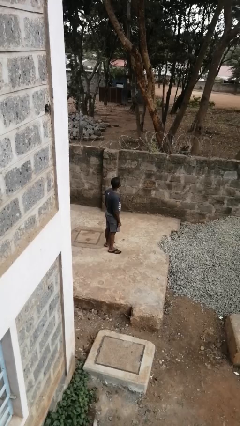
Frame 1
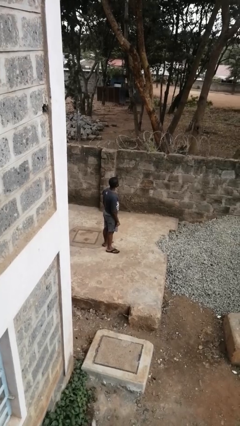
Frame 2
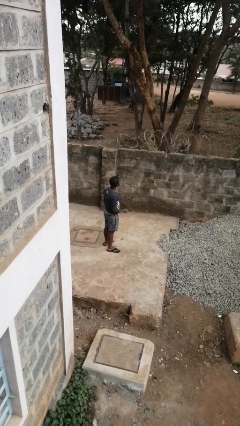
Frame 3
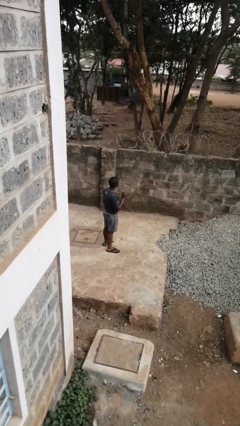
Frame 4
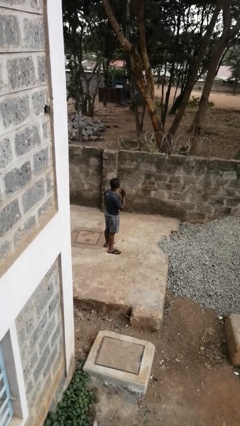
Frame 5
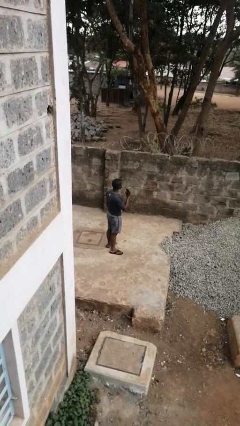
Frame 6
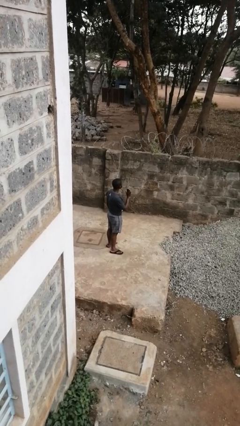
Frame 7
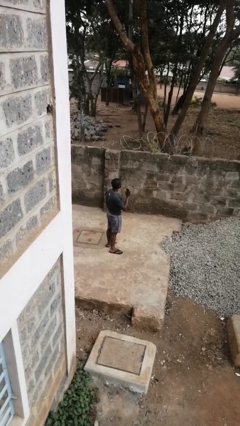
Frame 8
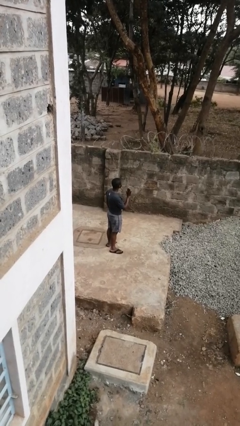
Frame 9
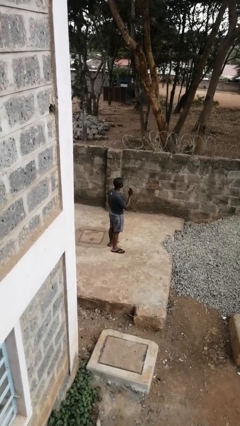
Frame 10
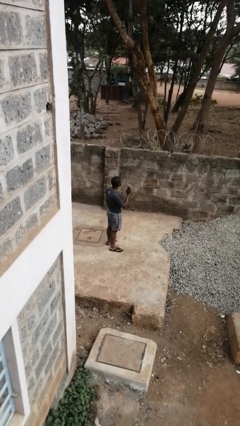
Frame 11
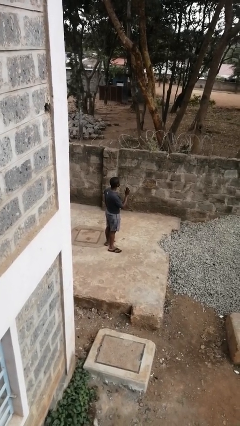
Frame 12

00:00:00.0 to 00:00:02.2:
person gestures stop

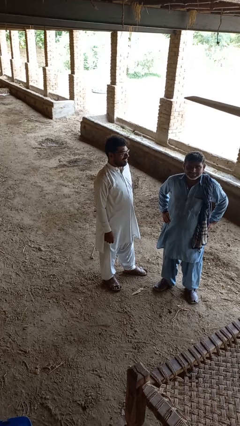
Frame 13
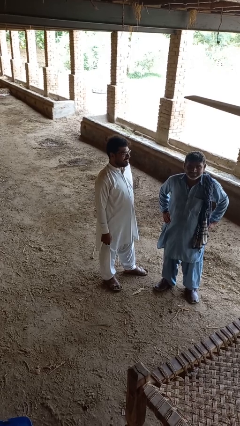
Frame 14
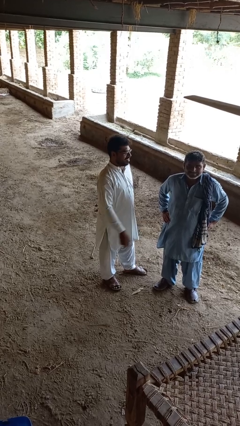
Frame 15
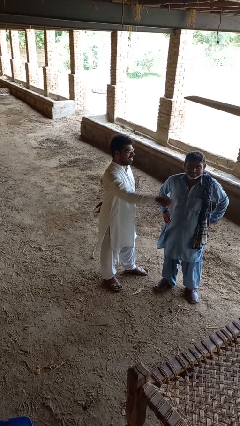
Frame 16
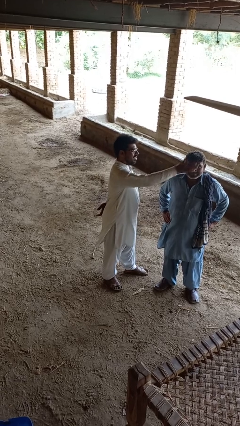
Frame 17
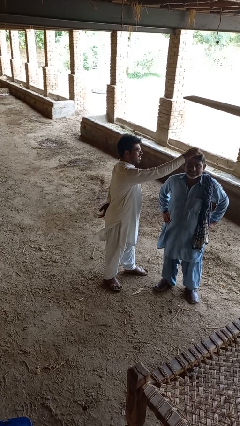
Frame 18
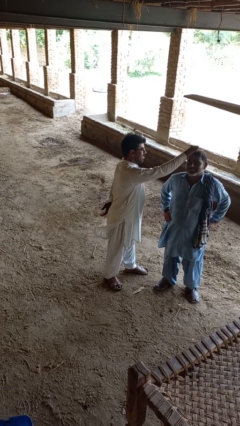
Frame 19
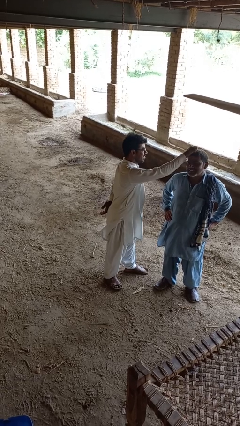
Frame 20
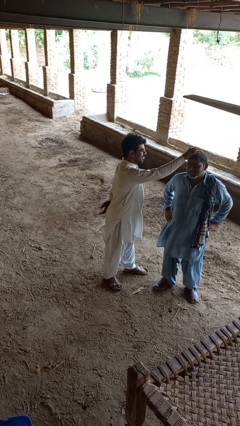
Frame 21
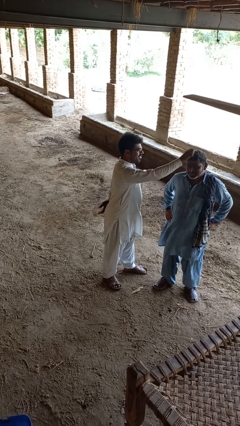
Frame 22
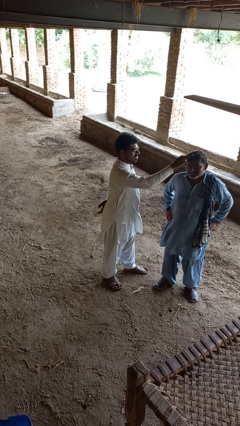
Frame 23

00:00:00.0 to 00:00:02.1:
person grabs person by hair

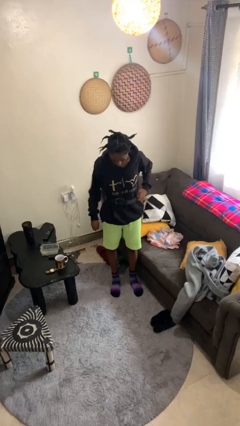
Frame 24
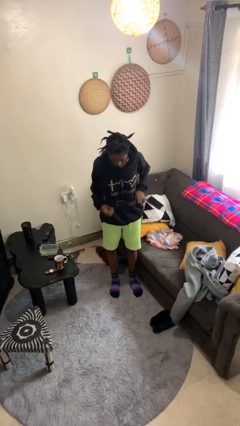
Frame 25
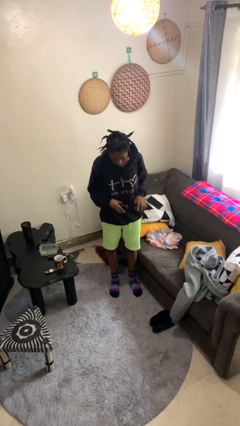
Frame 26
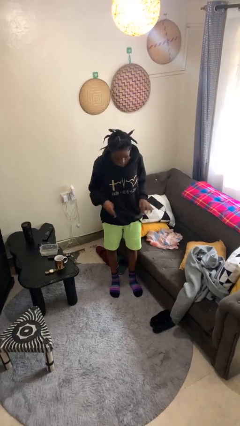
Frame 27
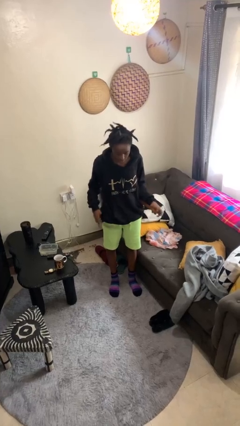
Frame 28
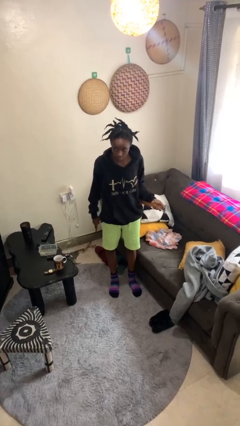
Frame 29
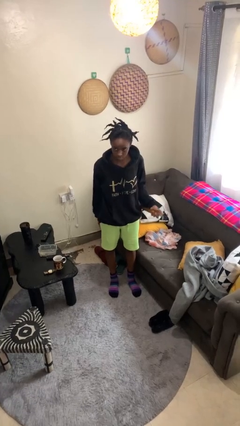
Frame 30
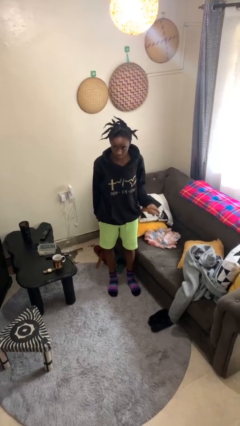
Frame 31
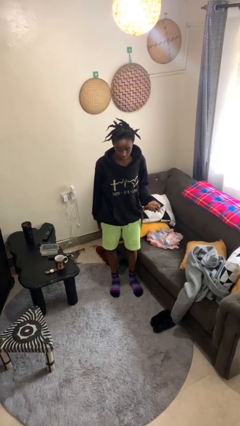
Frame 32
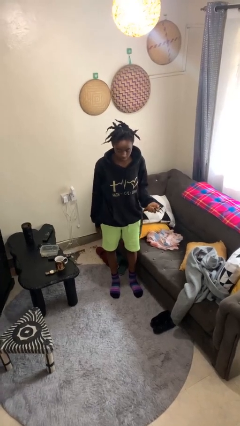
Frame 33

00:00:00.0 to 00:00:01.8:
person takes off belt

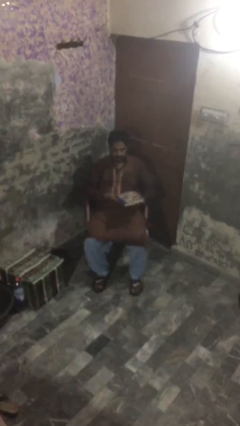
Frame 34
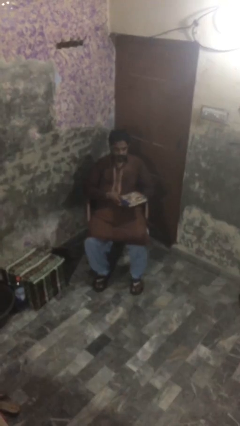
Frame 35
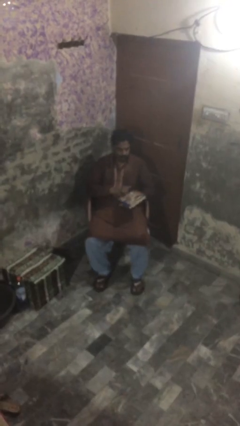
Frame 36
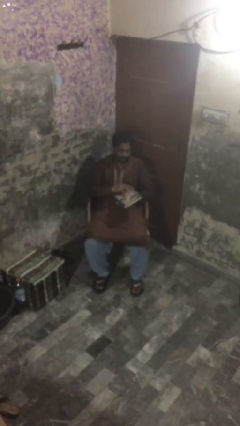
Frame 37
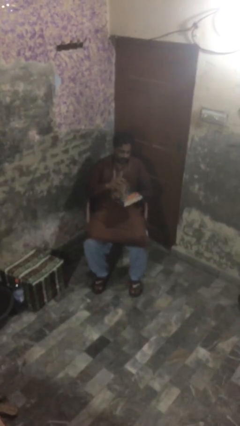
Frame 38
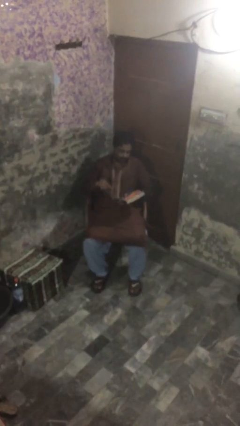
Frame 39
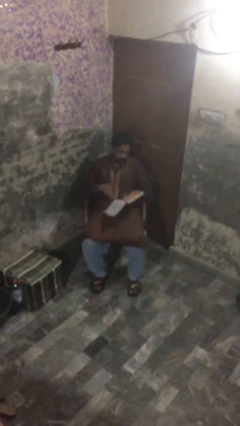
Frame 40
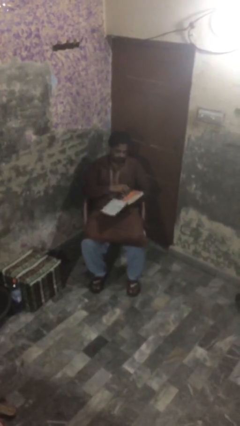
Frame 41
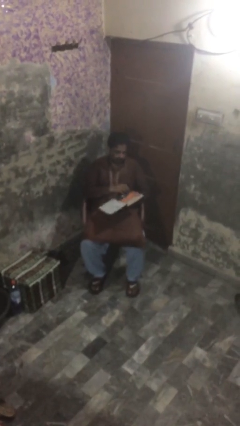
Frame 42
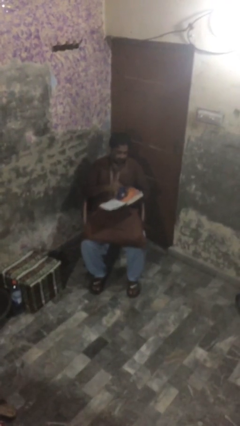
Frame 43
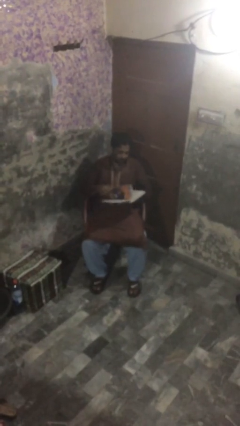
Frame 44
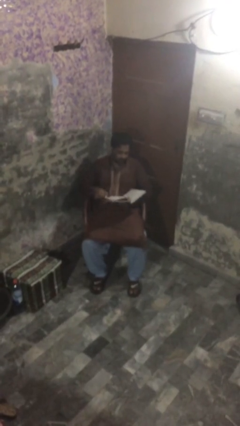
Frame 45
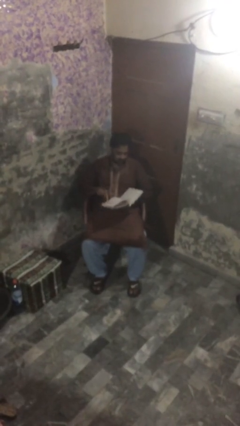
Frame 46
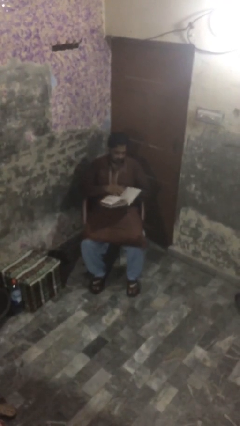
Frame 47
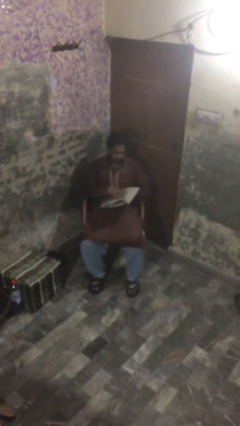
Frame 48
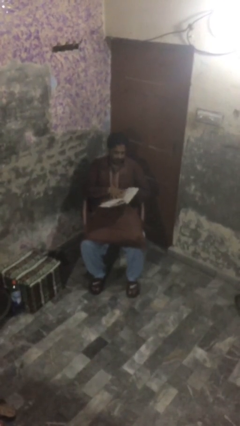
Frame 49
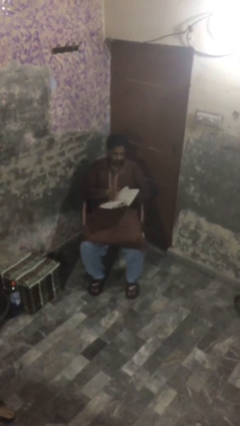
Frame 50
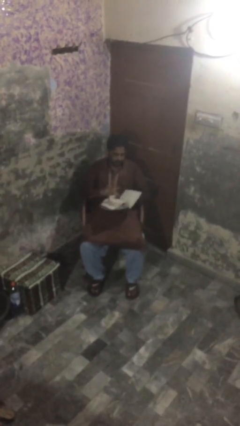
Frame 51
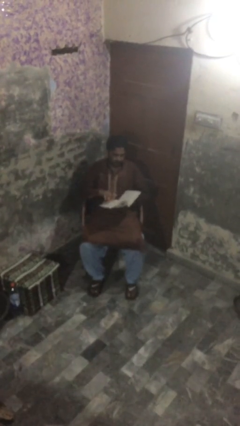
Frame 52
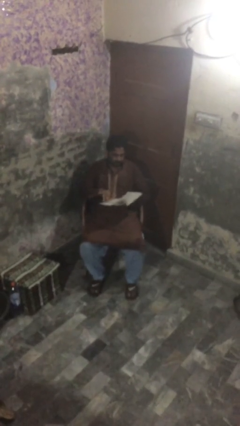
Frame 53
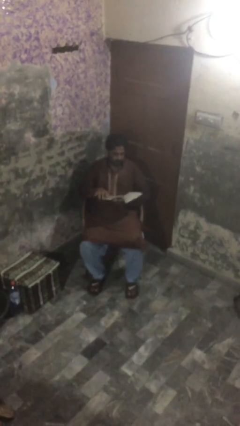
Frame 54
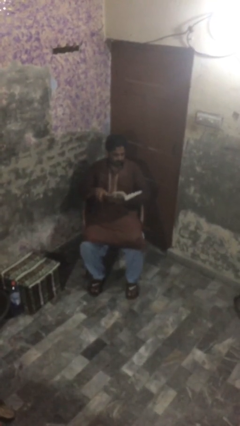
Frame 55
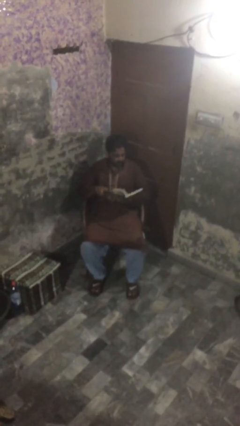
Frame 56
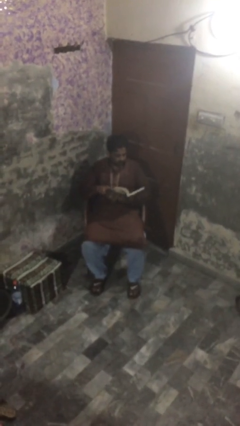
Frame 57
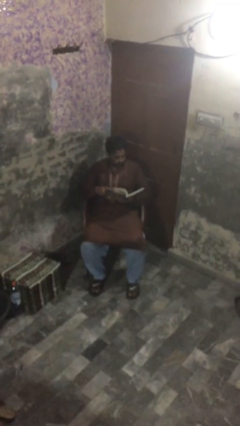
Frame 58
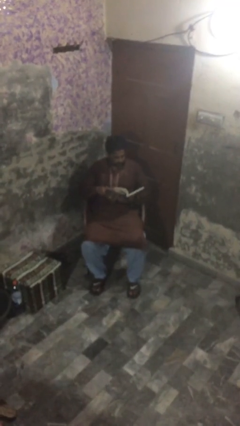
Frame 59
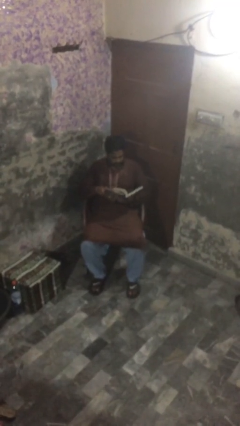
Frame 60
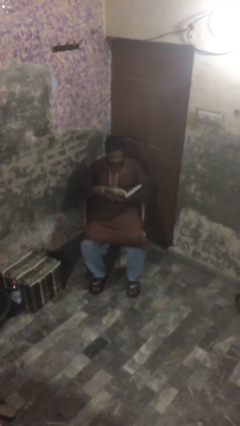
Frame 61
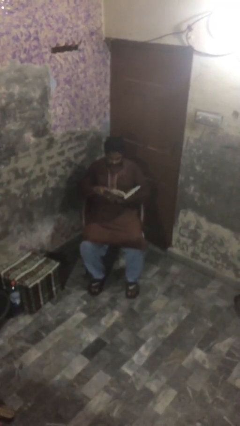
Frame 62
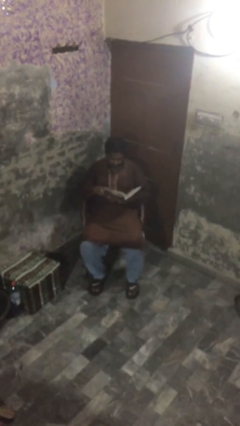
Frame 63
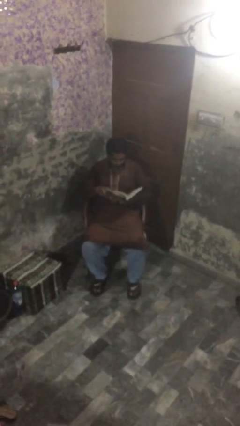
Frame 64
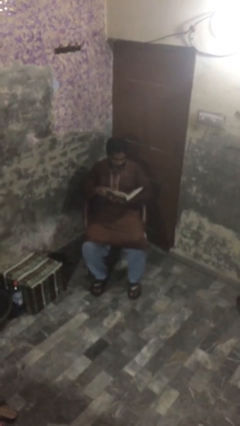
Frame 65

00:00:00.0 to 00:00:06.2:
person reads document

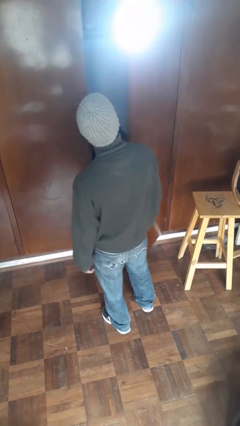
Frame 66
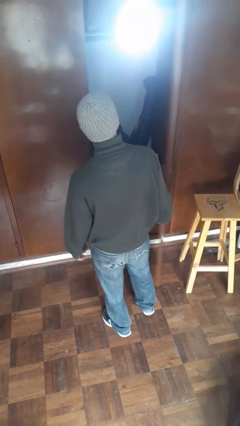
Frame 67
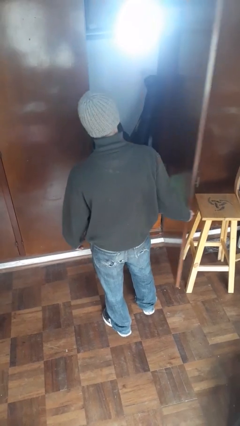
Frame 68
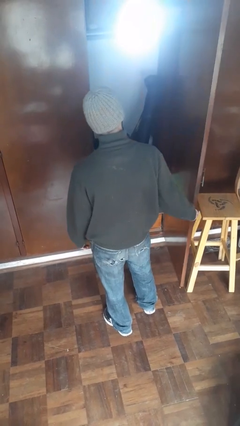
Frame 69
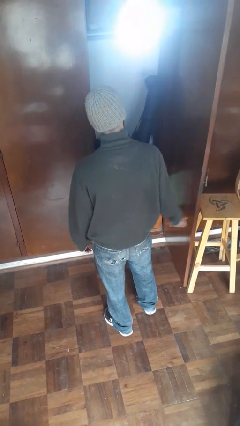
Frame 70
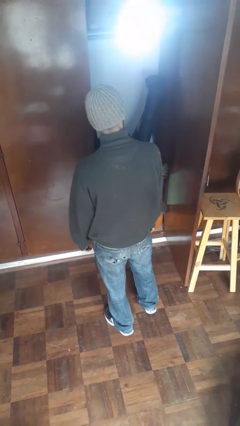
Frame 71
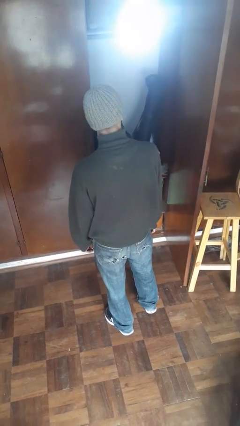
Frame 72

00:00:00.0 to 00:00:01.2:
person opens closet door

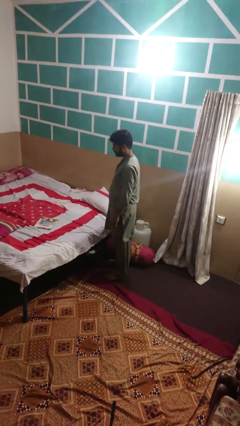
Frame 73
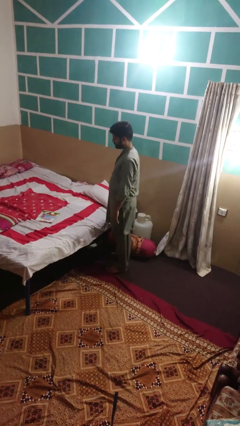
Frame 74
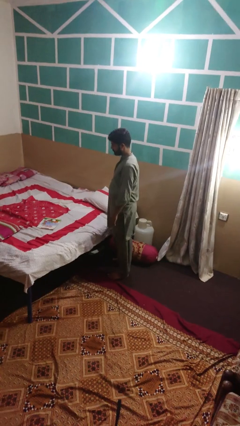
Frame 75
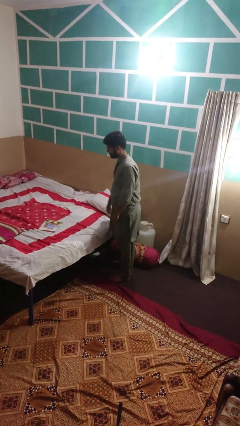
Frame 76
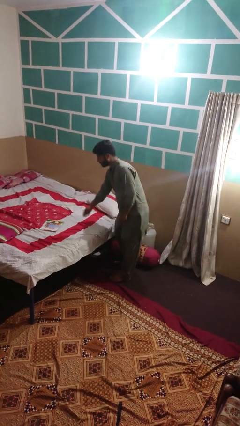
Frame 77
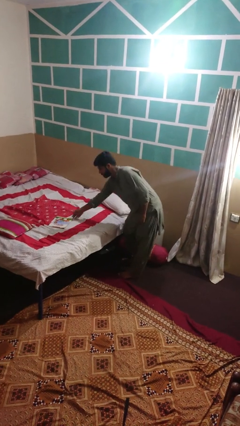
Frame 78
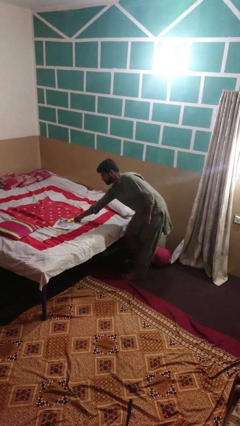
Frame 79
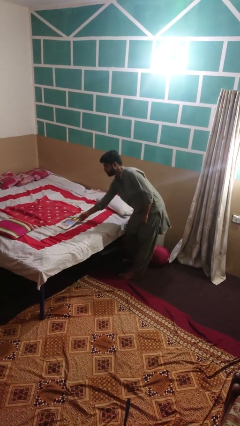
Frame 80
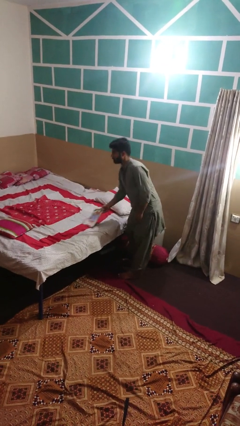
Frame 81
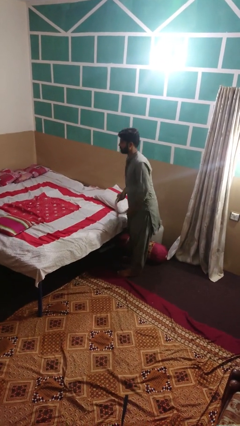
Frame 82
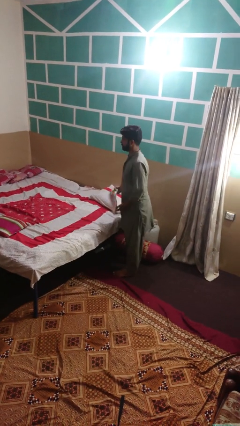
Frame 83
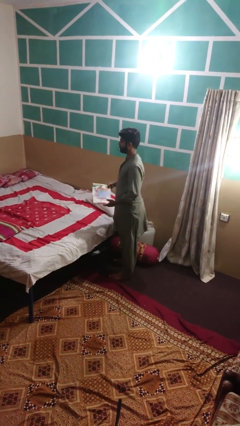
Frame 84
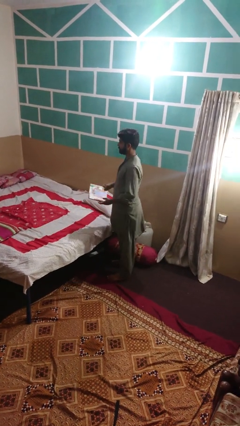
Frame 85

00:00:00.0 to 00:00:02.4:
person picks up object from bed

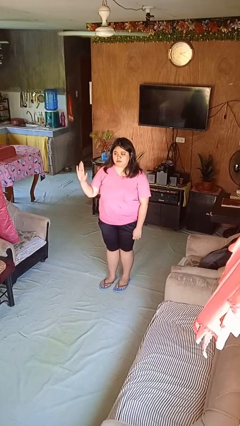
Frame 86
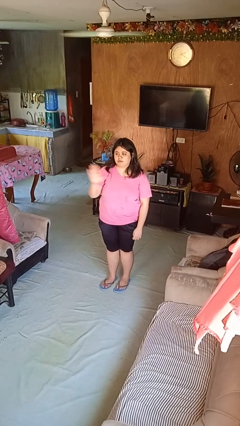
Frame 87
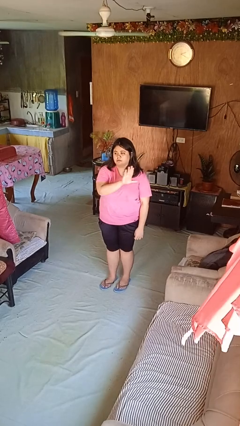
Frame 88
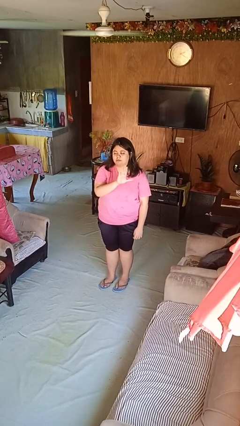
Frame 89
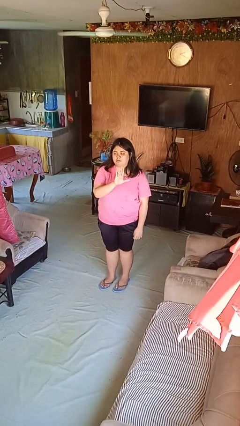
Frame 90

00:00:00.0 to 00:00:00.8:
person gestures swipe left

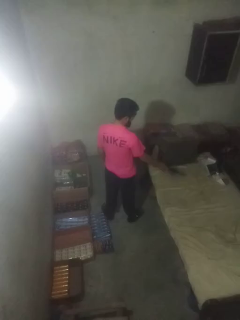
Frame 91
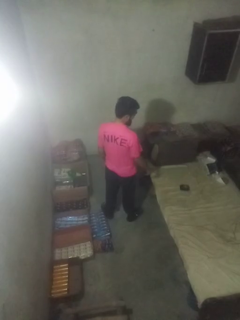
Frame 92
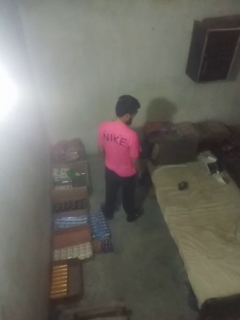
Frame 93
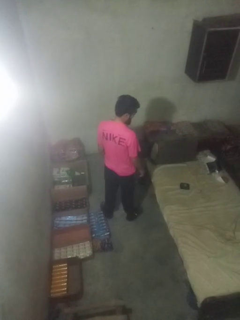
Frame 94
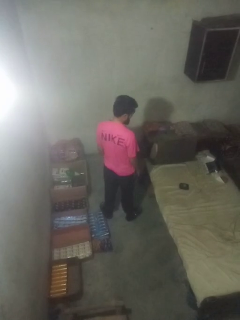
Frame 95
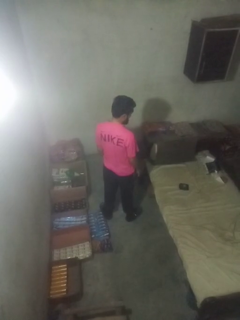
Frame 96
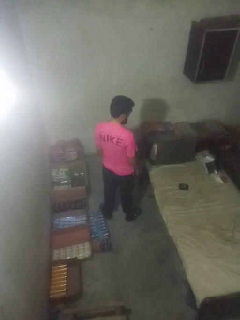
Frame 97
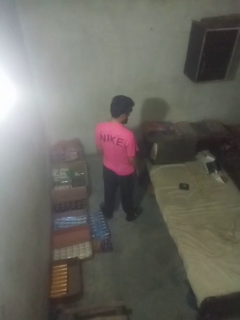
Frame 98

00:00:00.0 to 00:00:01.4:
person throws object on bed
